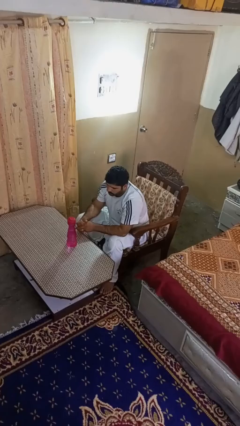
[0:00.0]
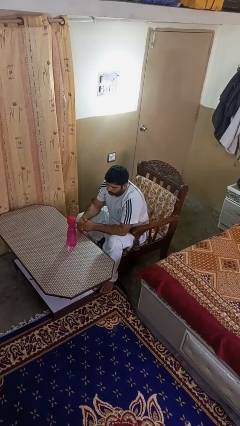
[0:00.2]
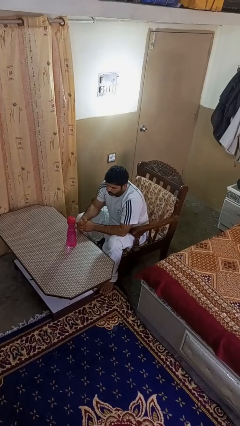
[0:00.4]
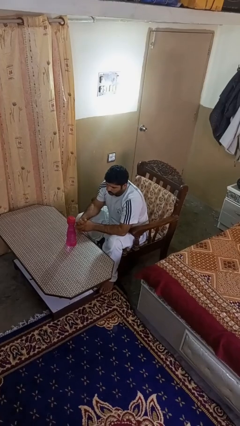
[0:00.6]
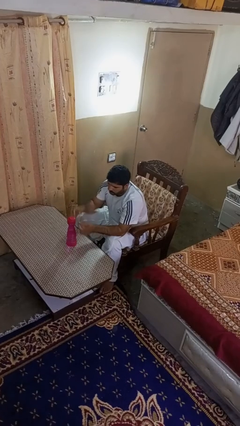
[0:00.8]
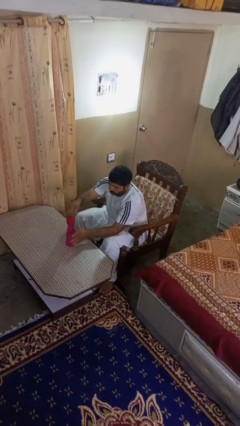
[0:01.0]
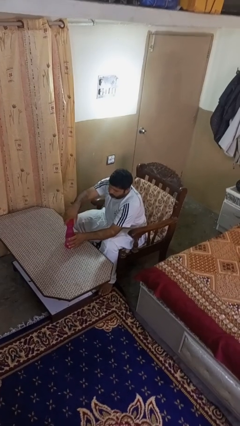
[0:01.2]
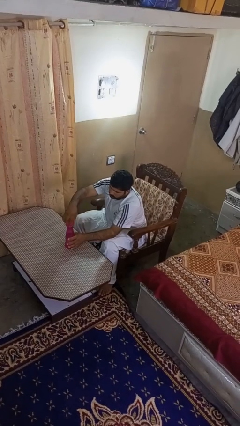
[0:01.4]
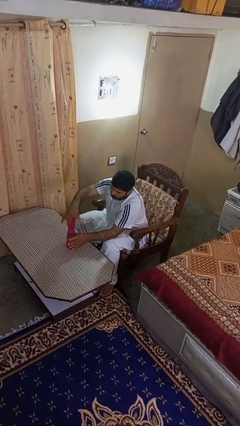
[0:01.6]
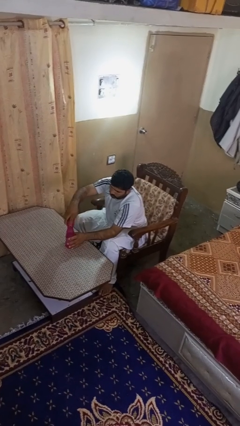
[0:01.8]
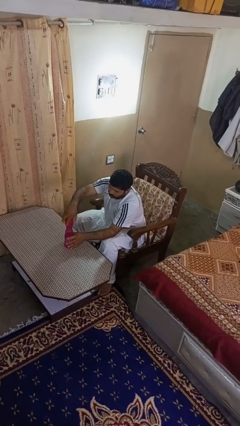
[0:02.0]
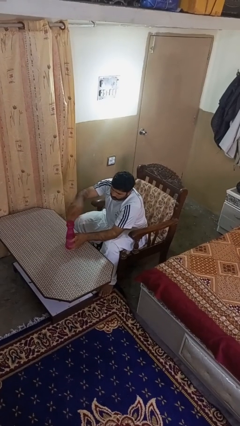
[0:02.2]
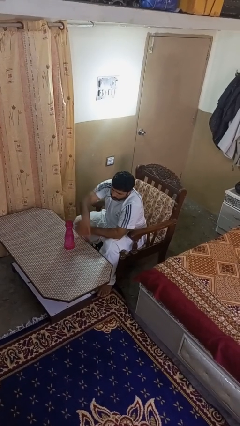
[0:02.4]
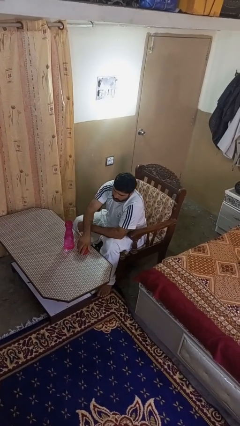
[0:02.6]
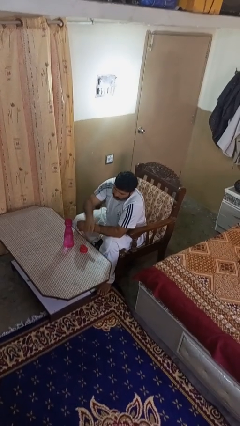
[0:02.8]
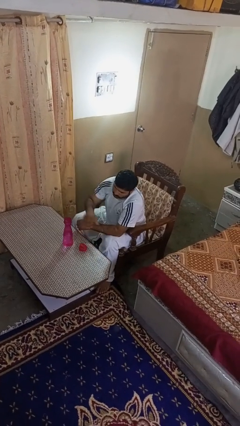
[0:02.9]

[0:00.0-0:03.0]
person unscrews lid from bottle

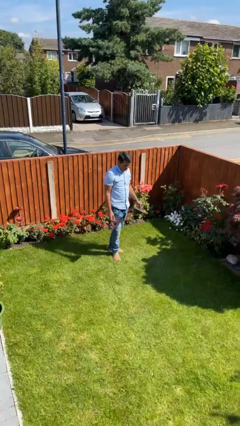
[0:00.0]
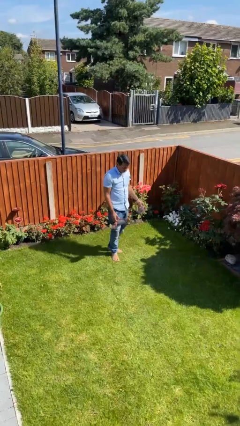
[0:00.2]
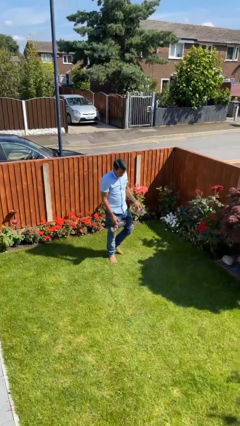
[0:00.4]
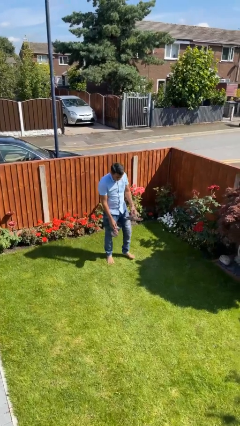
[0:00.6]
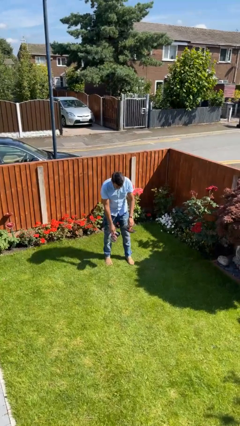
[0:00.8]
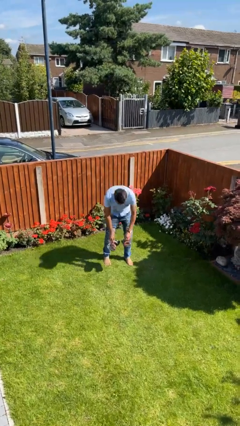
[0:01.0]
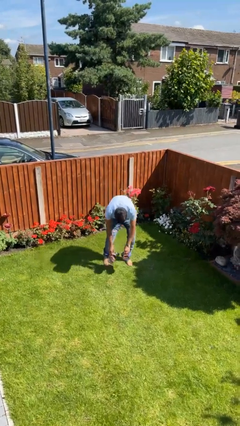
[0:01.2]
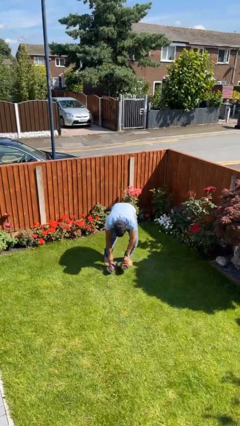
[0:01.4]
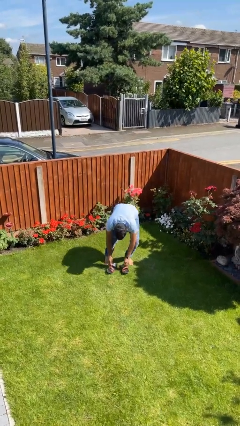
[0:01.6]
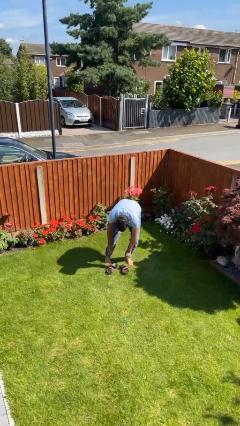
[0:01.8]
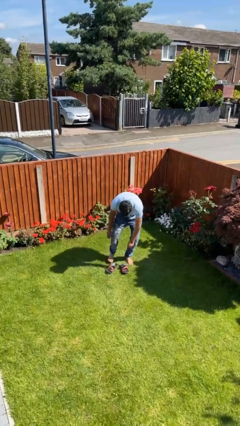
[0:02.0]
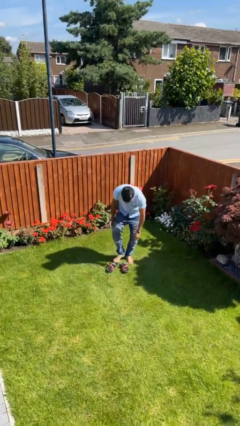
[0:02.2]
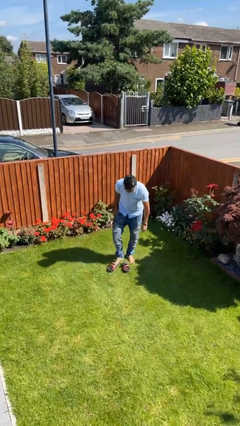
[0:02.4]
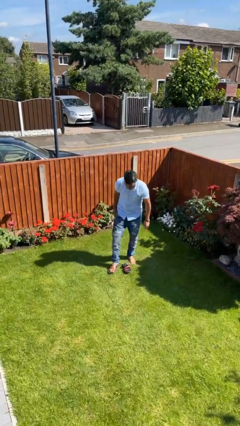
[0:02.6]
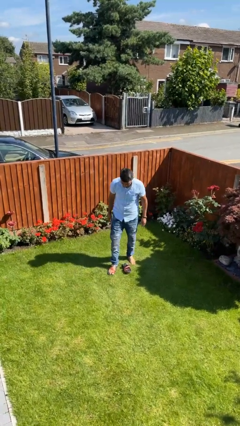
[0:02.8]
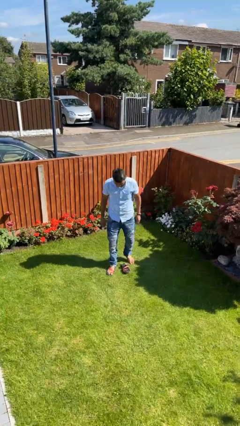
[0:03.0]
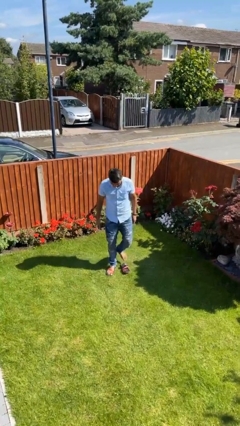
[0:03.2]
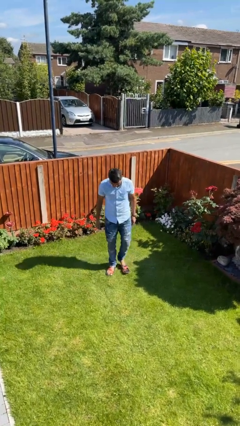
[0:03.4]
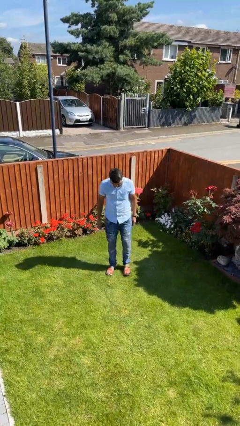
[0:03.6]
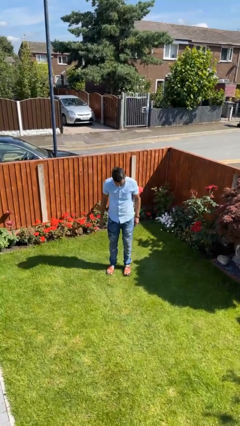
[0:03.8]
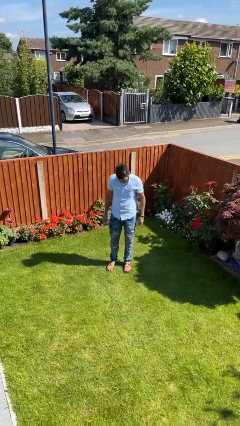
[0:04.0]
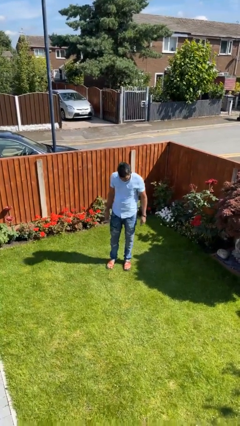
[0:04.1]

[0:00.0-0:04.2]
person puts on shoes

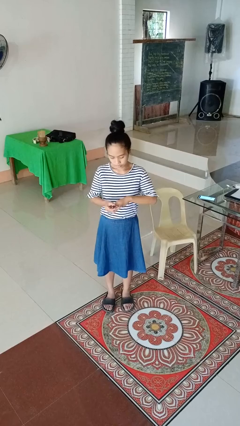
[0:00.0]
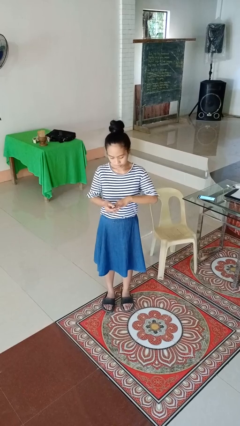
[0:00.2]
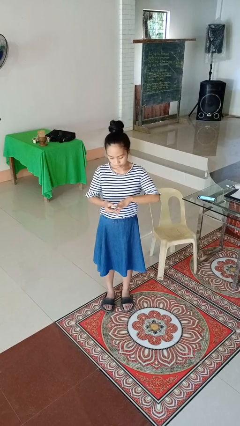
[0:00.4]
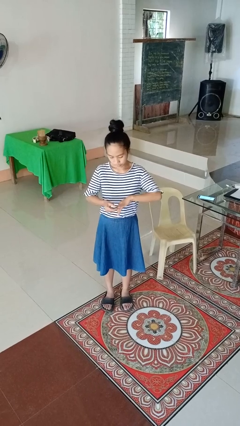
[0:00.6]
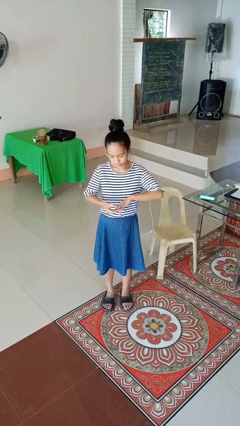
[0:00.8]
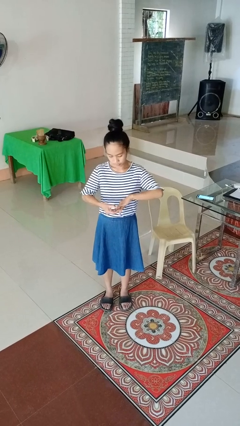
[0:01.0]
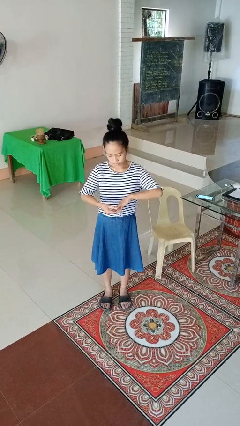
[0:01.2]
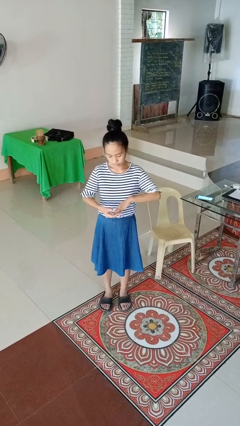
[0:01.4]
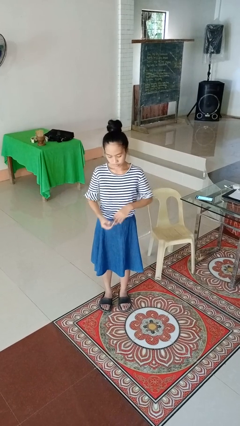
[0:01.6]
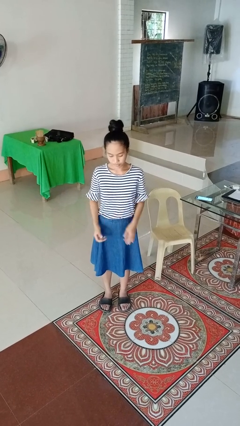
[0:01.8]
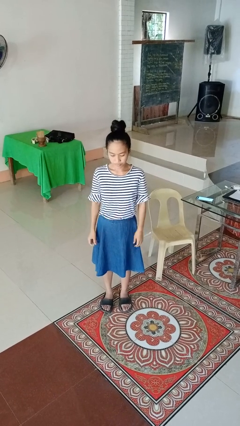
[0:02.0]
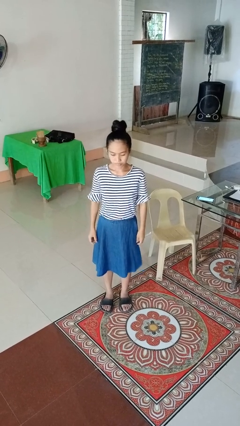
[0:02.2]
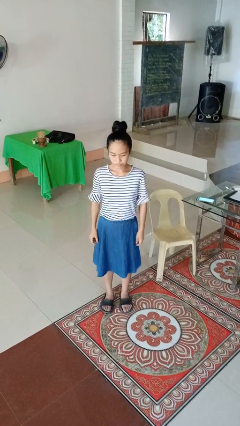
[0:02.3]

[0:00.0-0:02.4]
person clips fingernails

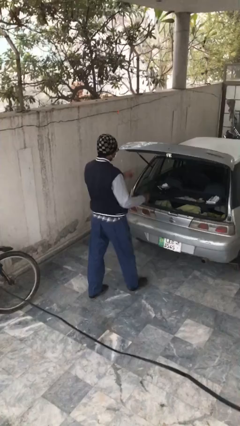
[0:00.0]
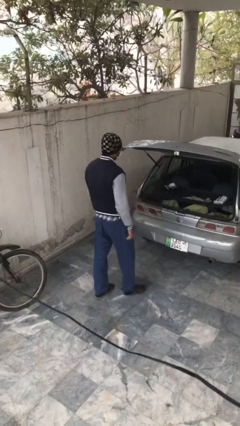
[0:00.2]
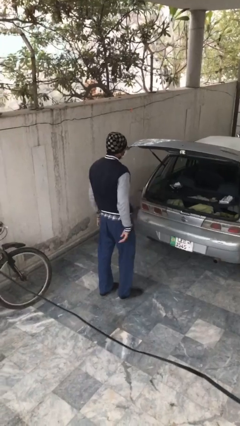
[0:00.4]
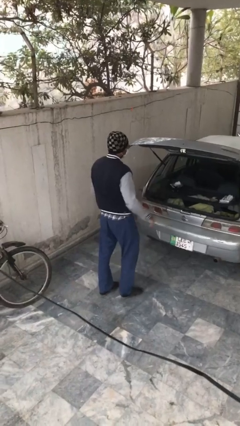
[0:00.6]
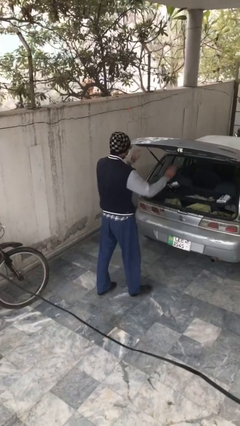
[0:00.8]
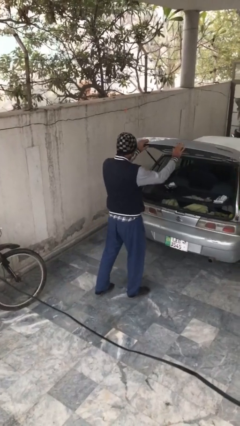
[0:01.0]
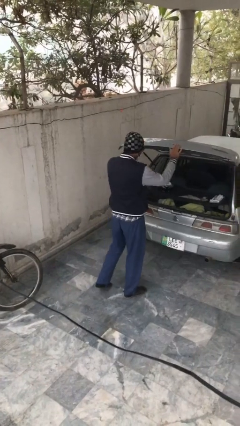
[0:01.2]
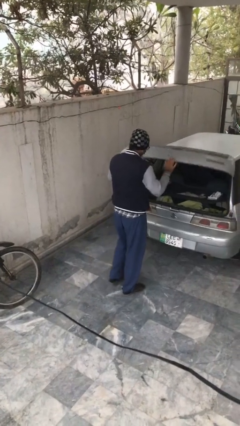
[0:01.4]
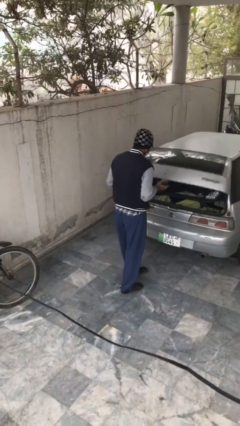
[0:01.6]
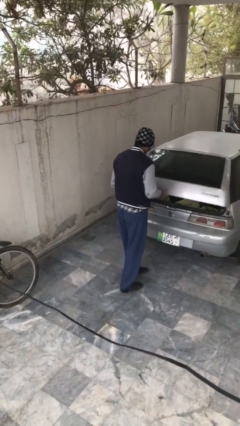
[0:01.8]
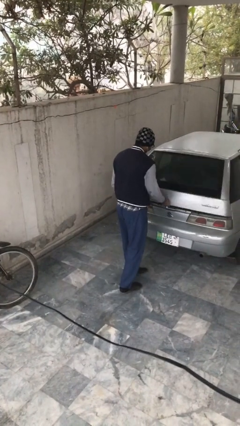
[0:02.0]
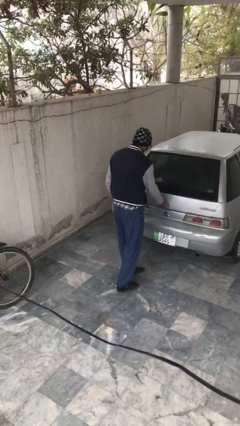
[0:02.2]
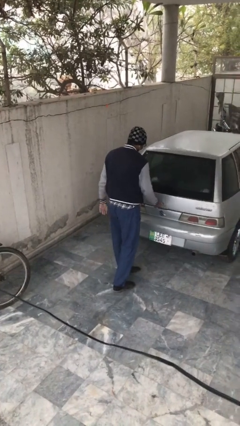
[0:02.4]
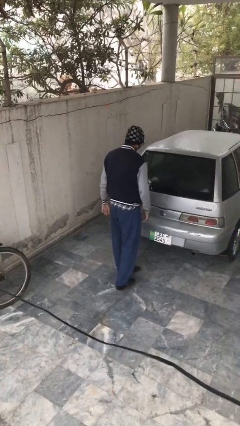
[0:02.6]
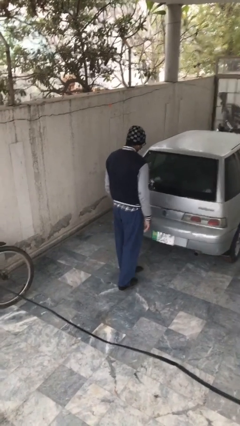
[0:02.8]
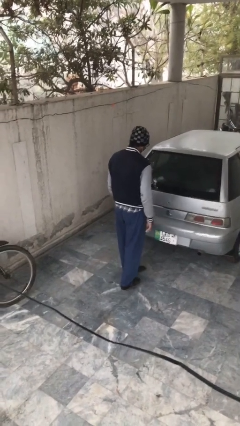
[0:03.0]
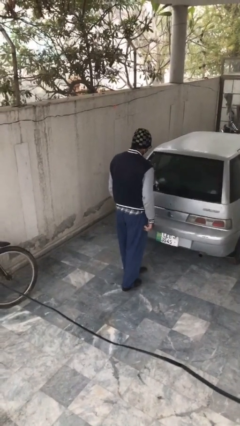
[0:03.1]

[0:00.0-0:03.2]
person closes car trunk

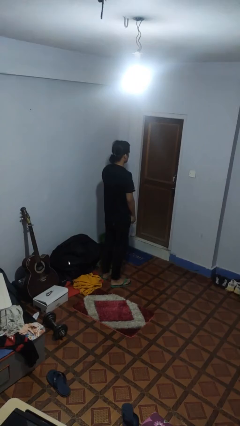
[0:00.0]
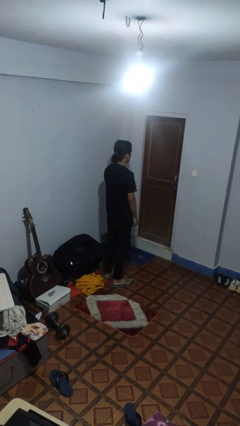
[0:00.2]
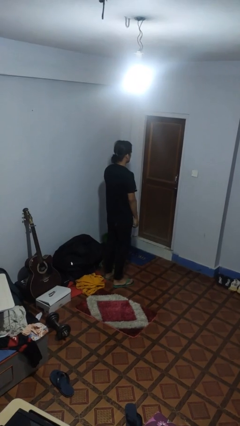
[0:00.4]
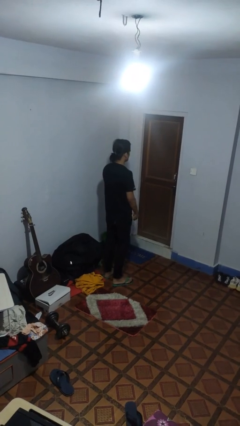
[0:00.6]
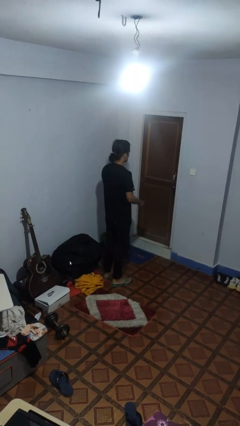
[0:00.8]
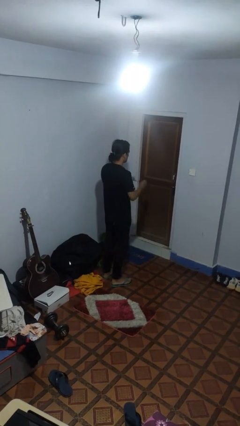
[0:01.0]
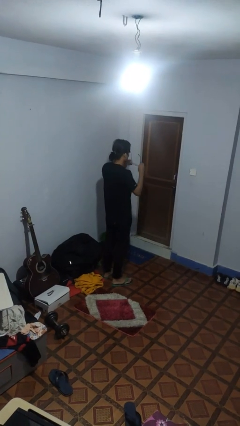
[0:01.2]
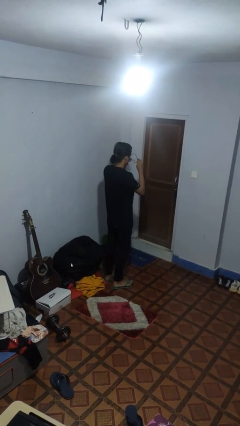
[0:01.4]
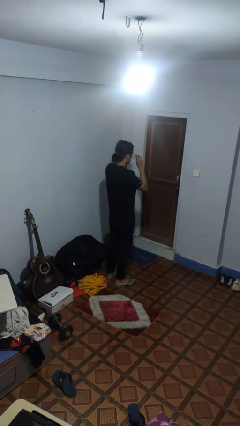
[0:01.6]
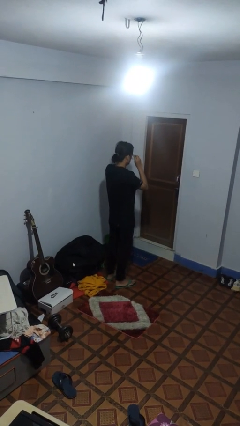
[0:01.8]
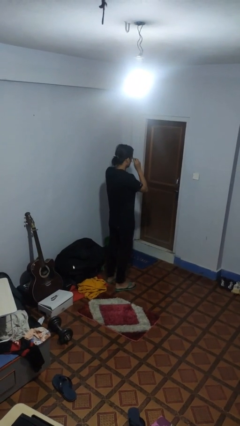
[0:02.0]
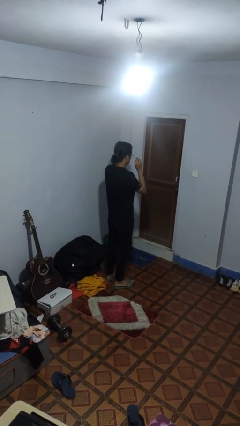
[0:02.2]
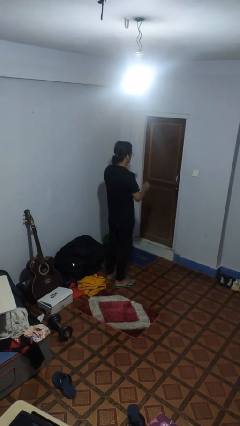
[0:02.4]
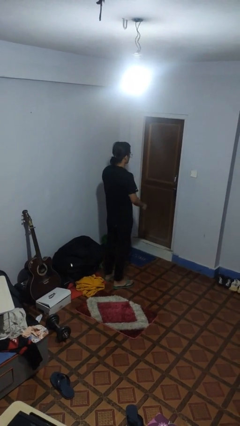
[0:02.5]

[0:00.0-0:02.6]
person puts on glasses

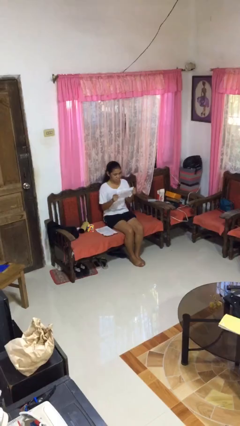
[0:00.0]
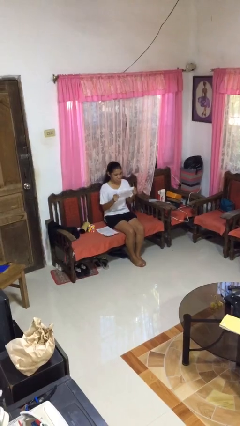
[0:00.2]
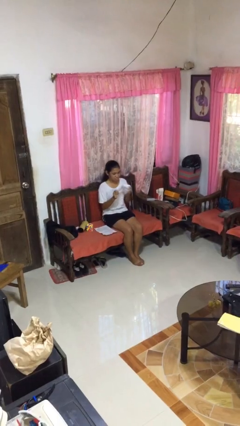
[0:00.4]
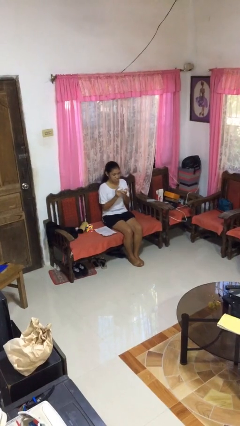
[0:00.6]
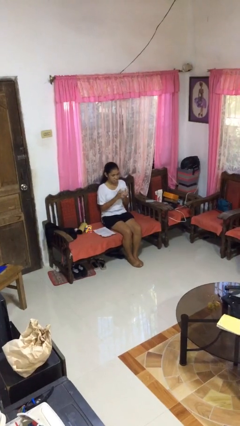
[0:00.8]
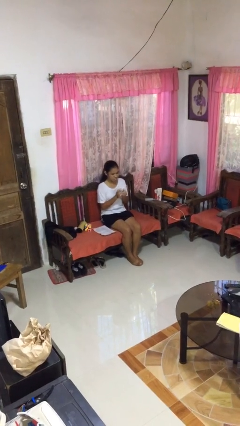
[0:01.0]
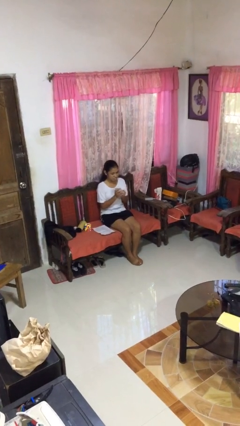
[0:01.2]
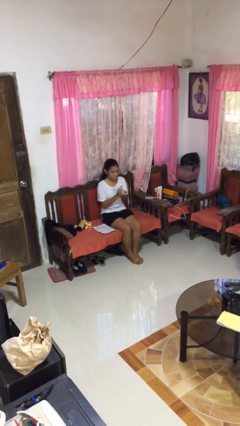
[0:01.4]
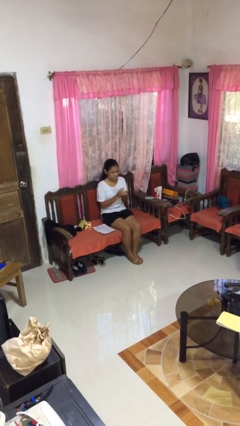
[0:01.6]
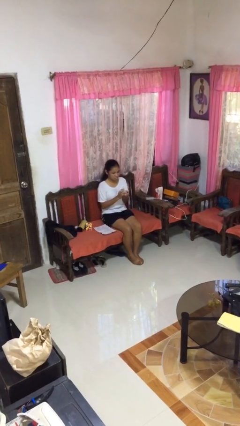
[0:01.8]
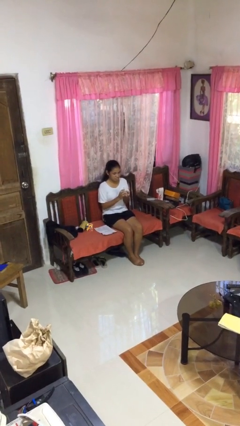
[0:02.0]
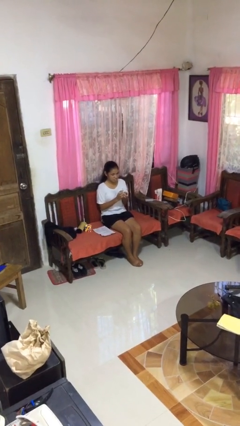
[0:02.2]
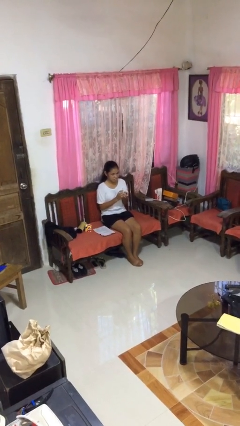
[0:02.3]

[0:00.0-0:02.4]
person crumples paper
